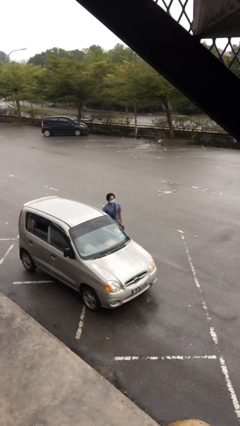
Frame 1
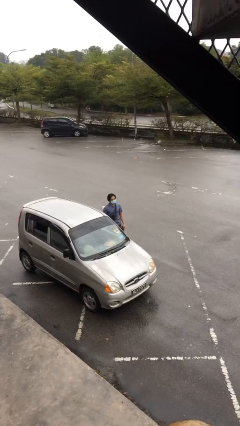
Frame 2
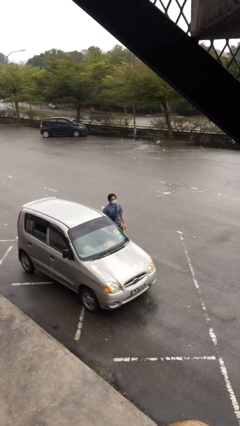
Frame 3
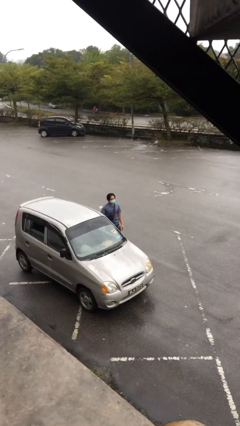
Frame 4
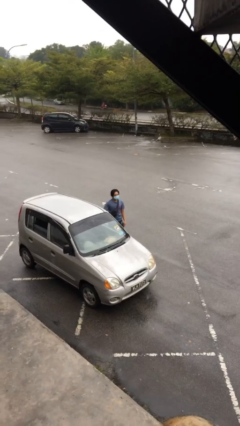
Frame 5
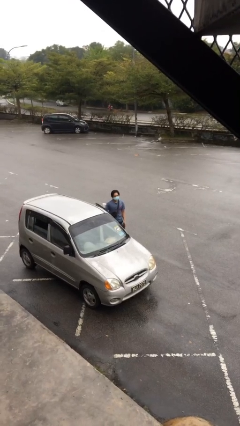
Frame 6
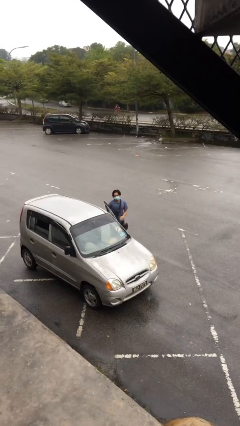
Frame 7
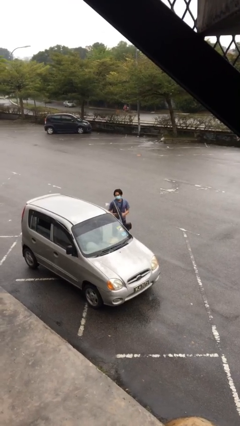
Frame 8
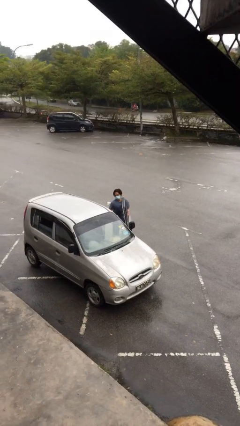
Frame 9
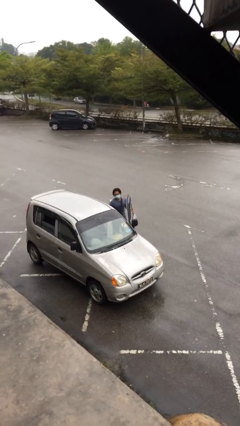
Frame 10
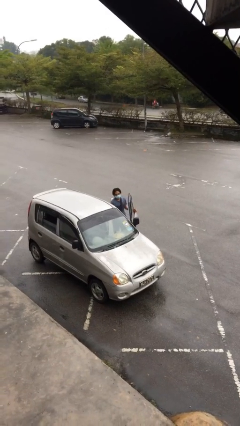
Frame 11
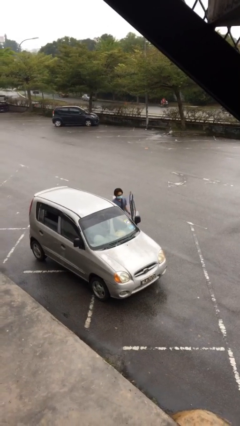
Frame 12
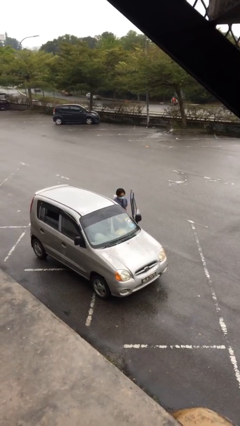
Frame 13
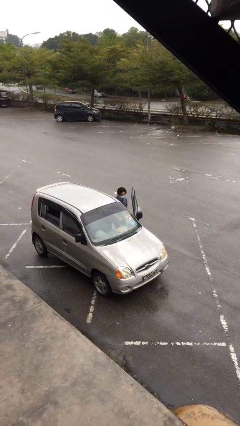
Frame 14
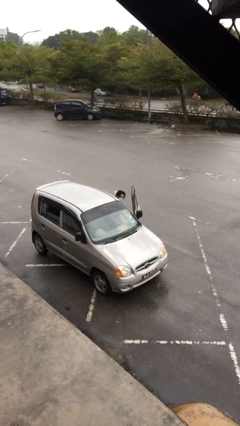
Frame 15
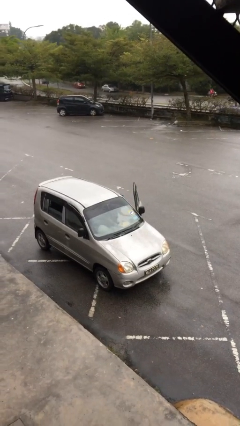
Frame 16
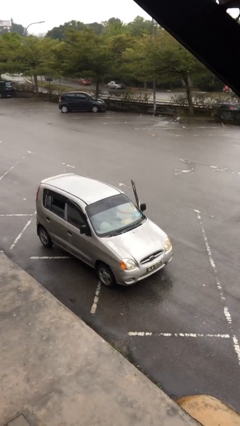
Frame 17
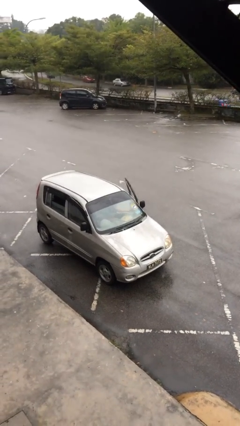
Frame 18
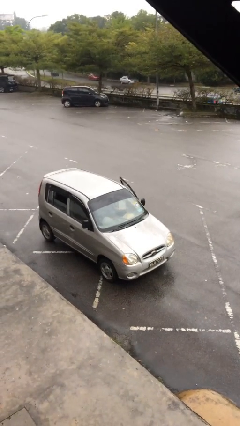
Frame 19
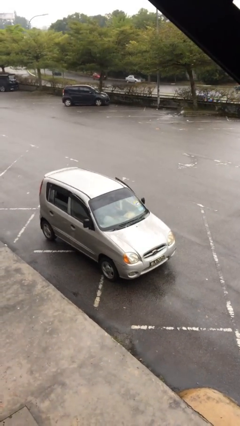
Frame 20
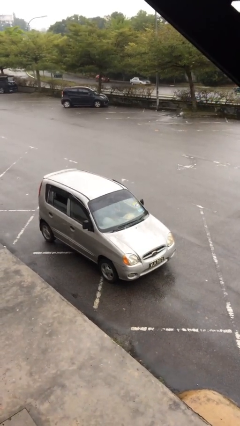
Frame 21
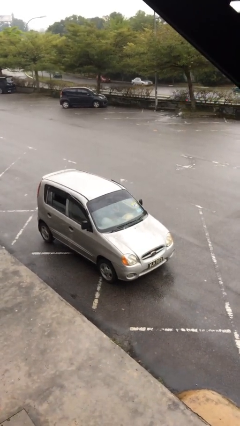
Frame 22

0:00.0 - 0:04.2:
person enters car

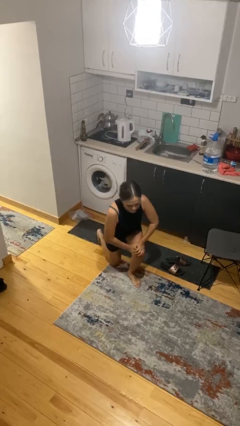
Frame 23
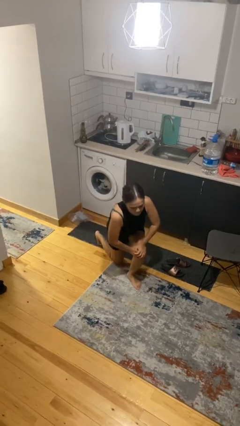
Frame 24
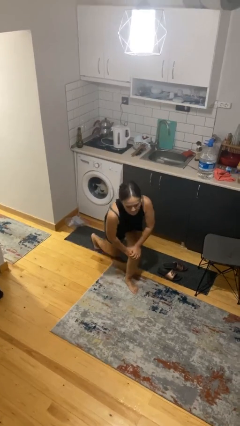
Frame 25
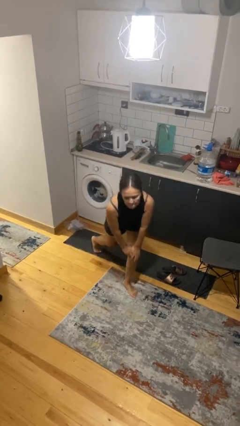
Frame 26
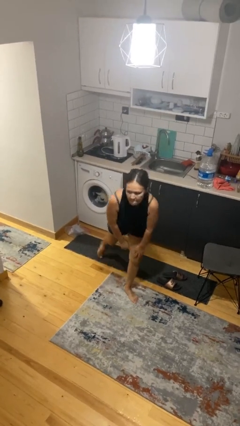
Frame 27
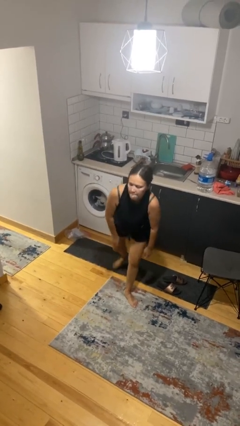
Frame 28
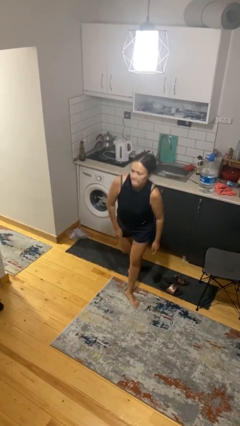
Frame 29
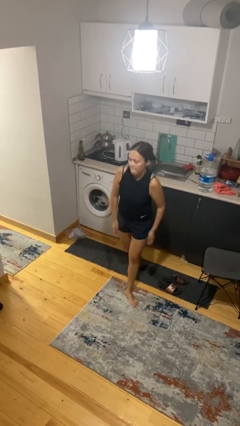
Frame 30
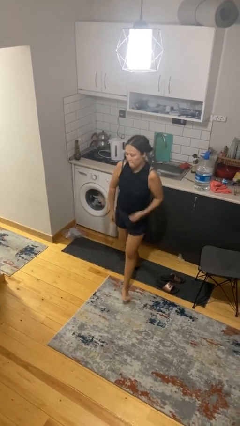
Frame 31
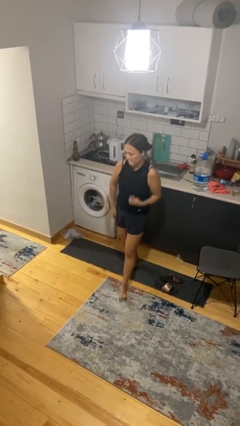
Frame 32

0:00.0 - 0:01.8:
person stands up from floor

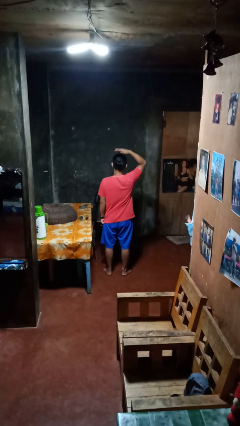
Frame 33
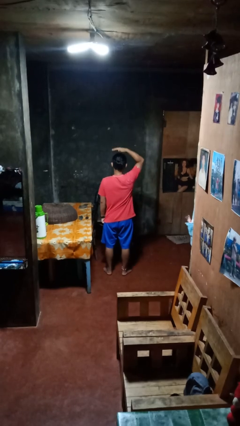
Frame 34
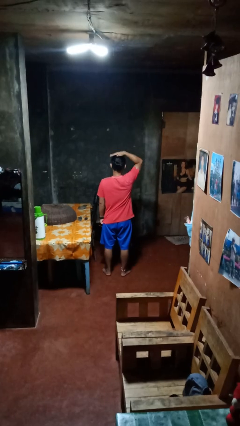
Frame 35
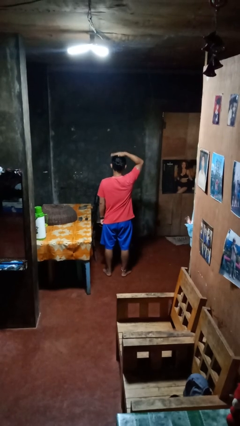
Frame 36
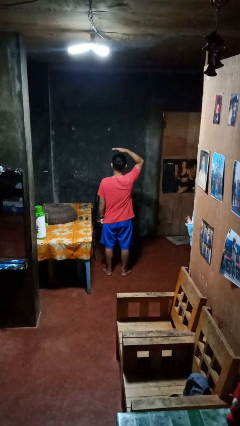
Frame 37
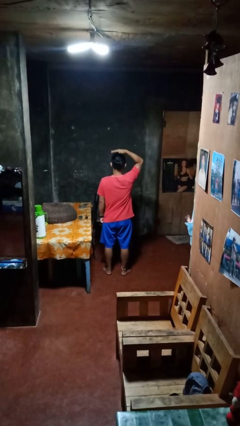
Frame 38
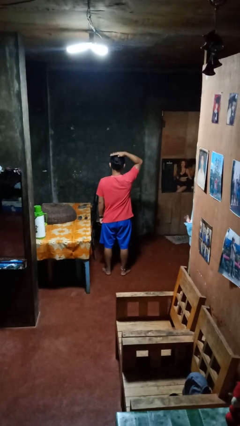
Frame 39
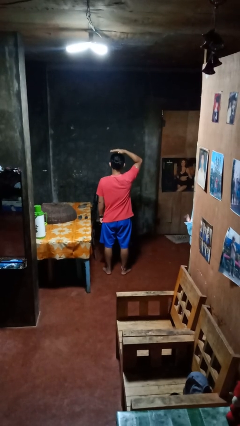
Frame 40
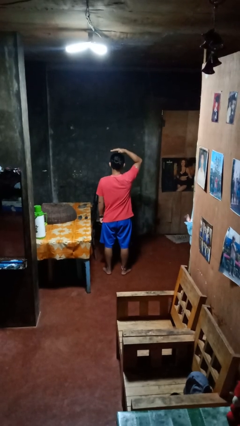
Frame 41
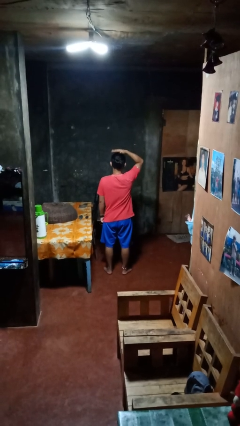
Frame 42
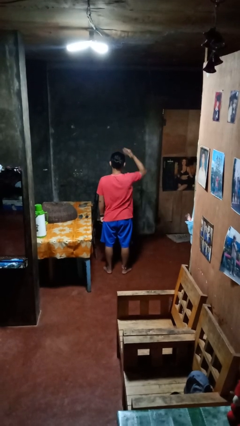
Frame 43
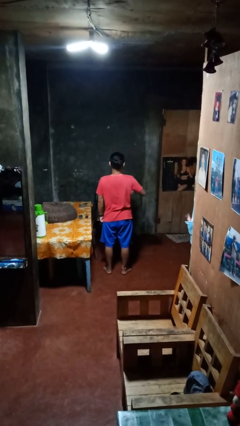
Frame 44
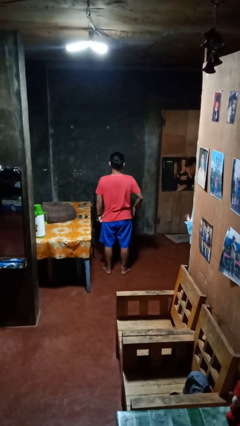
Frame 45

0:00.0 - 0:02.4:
person pats head

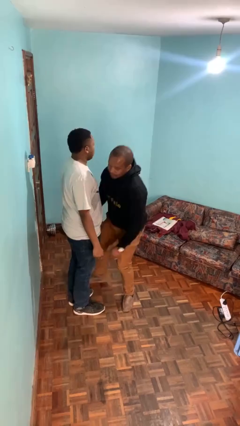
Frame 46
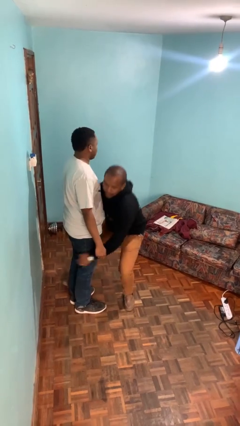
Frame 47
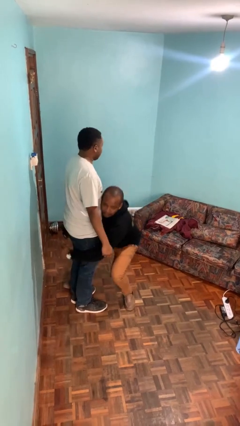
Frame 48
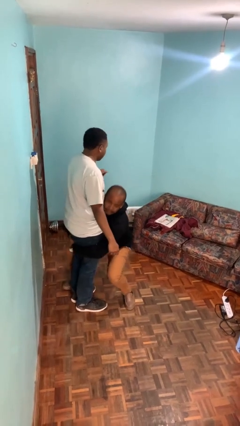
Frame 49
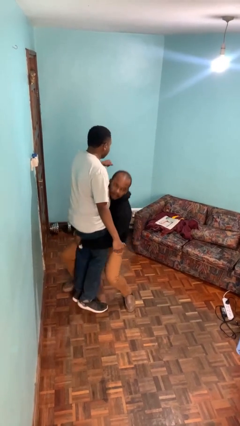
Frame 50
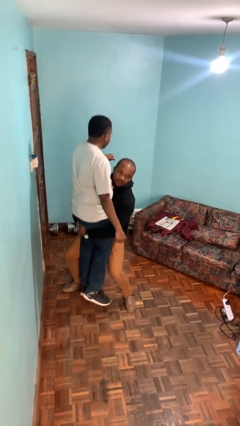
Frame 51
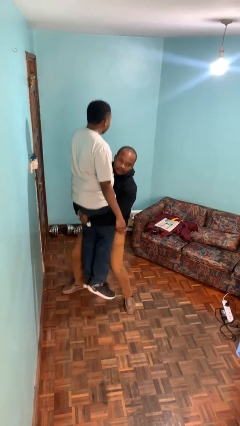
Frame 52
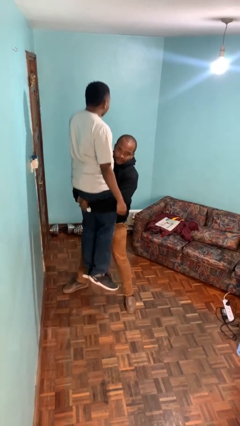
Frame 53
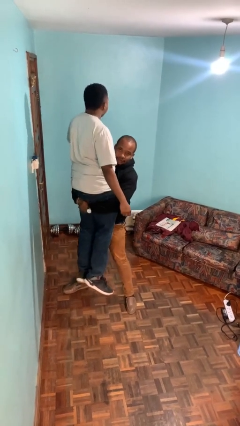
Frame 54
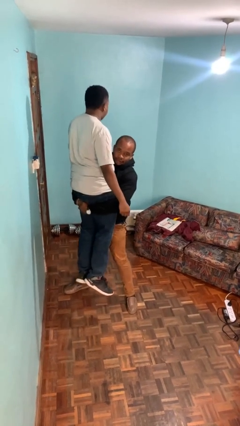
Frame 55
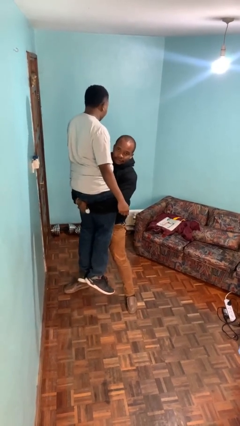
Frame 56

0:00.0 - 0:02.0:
person picks up person

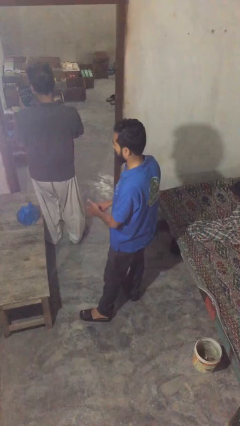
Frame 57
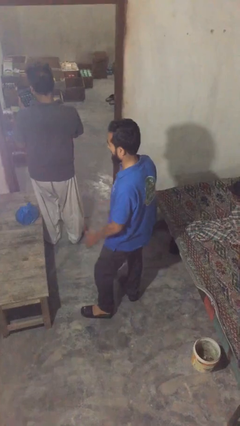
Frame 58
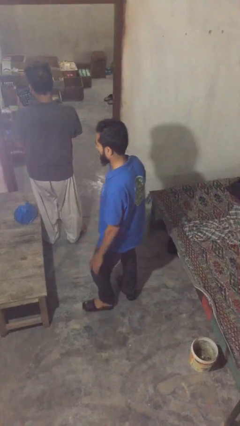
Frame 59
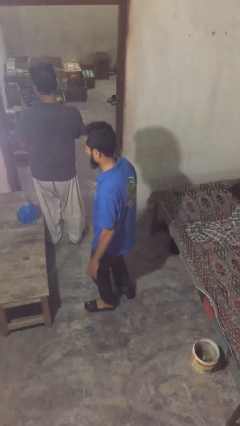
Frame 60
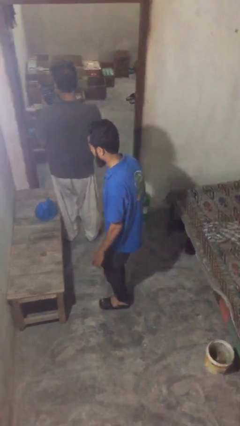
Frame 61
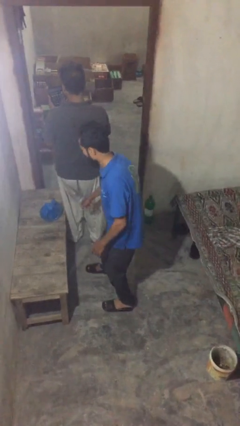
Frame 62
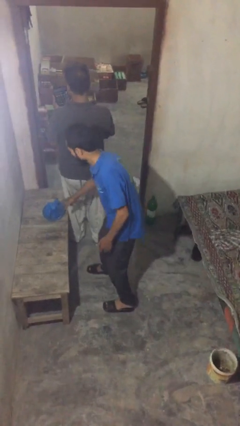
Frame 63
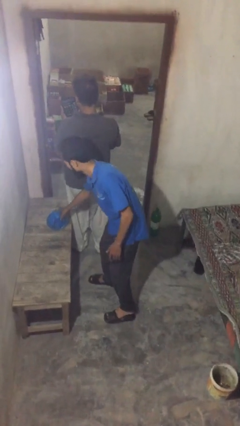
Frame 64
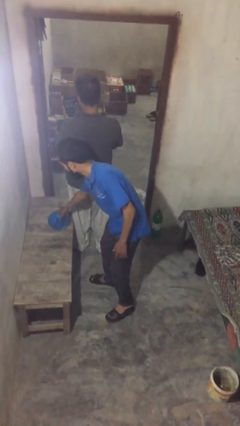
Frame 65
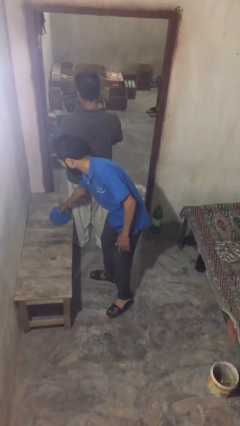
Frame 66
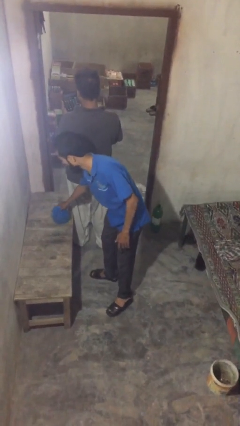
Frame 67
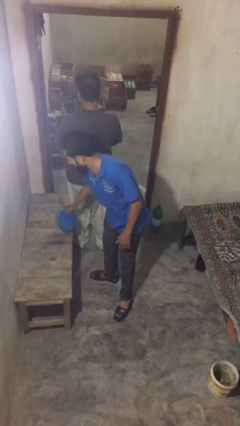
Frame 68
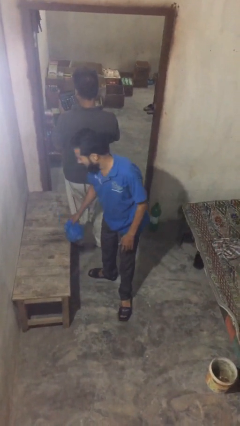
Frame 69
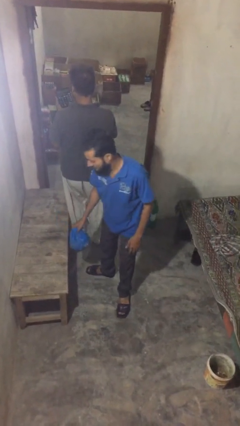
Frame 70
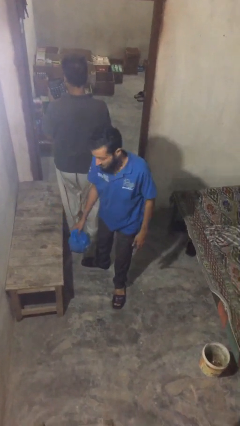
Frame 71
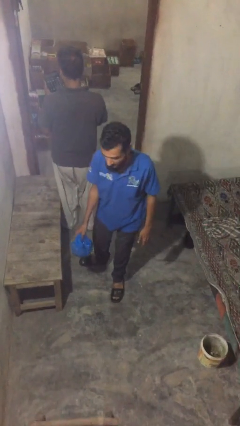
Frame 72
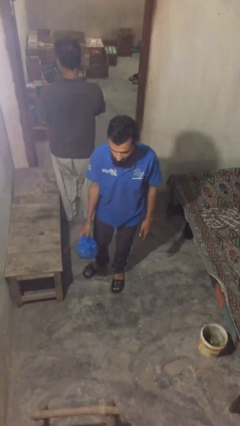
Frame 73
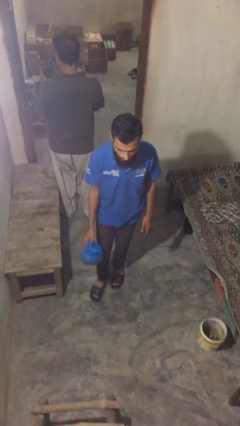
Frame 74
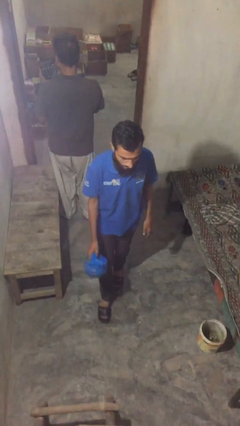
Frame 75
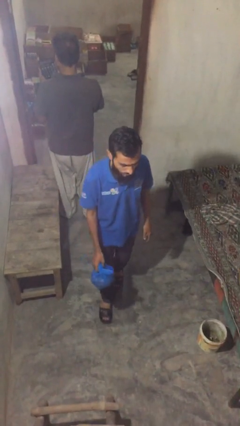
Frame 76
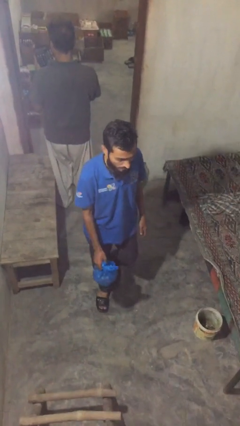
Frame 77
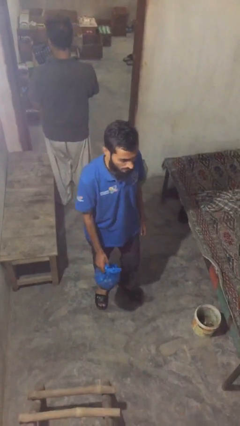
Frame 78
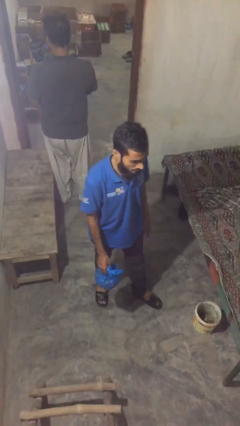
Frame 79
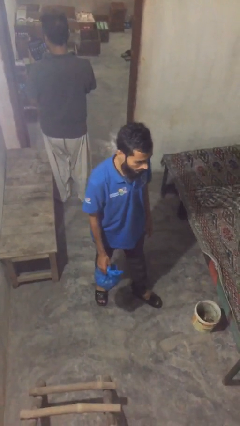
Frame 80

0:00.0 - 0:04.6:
person steals object from person

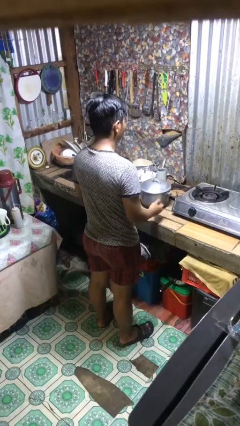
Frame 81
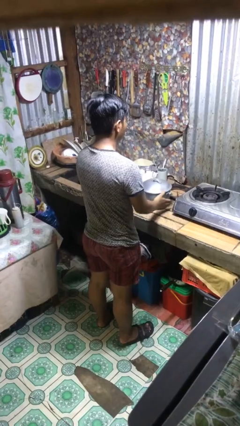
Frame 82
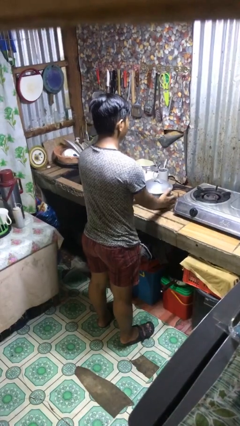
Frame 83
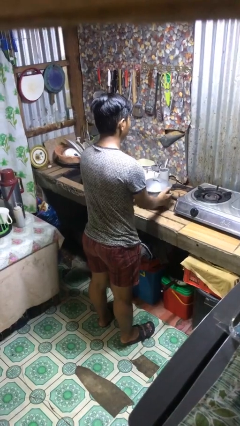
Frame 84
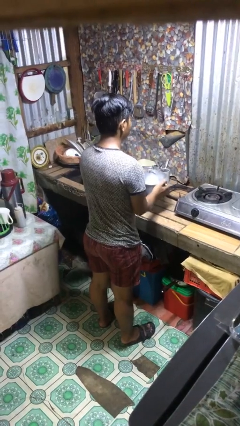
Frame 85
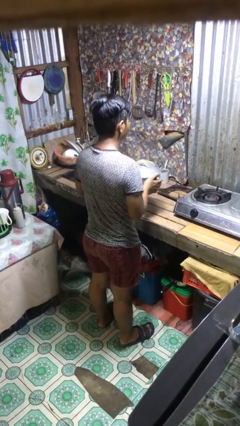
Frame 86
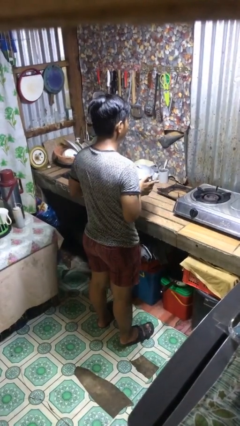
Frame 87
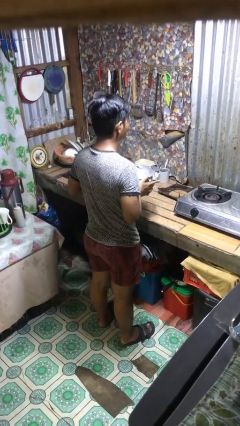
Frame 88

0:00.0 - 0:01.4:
person picks up object from countertop

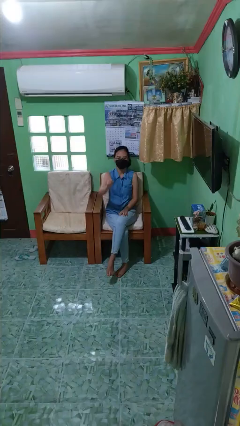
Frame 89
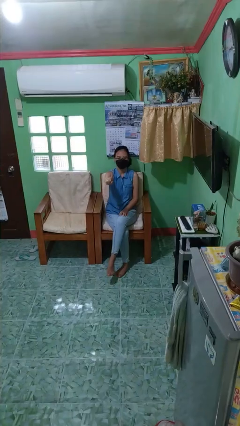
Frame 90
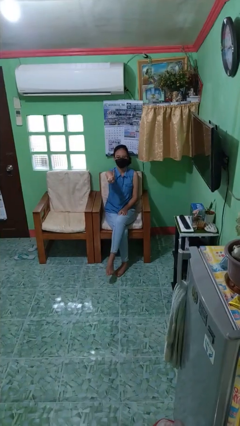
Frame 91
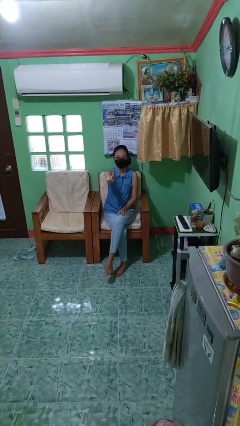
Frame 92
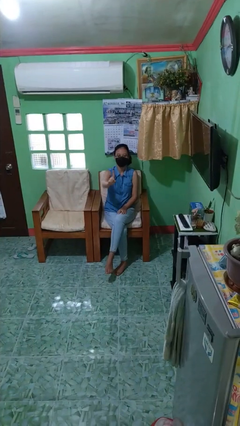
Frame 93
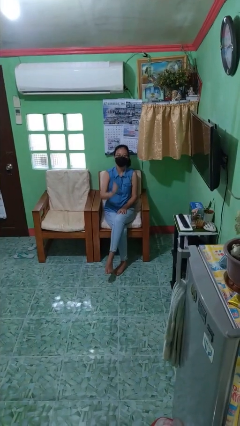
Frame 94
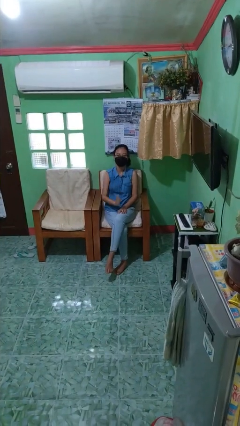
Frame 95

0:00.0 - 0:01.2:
person gestures number one
